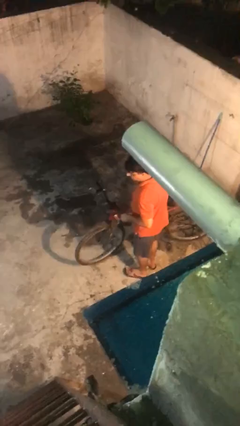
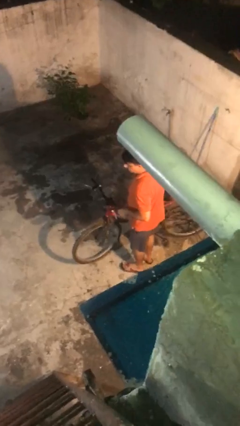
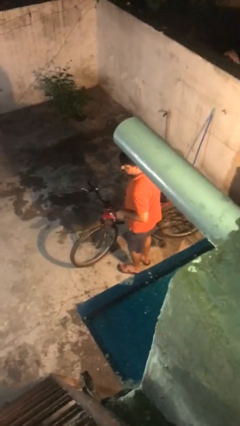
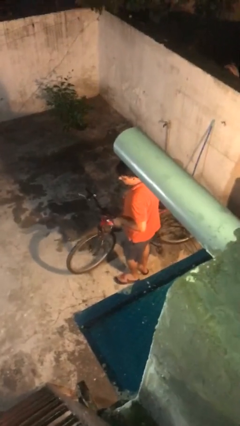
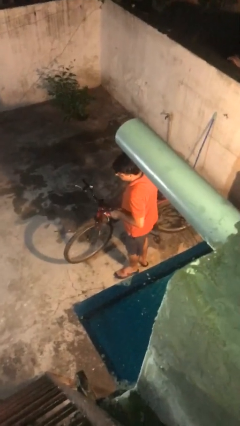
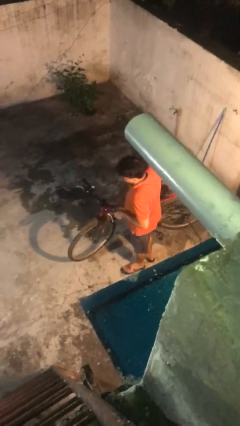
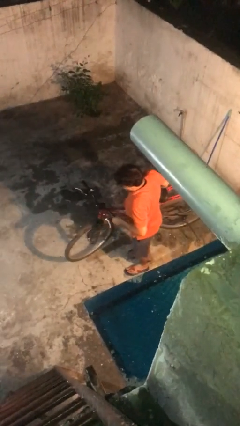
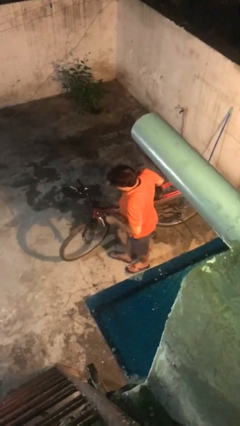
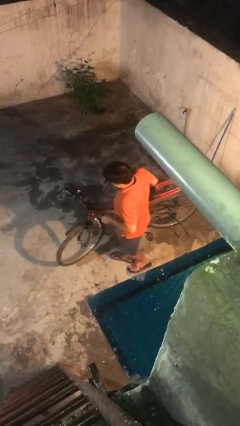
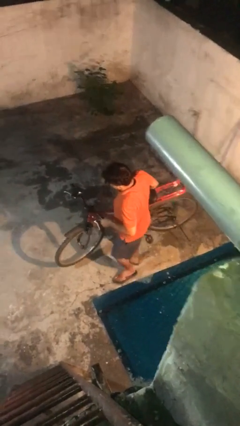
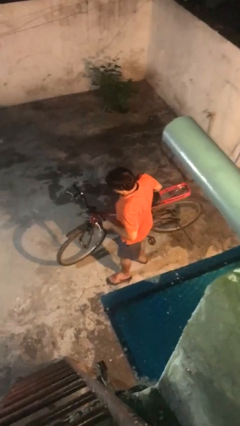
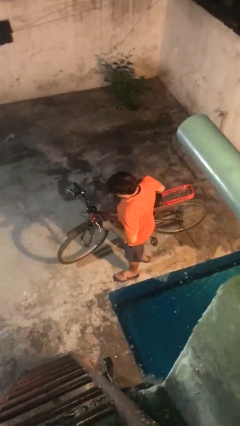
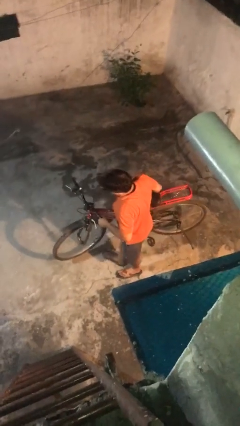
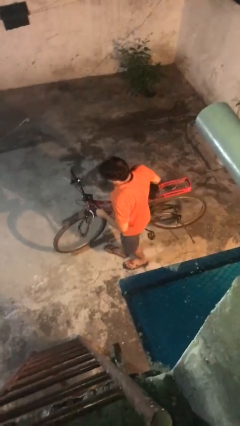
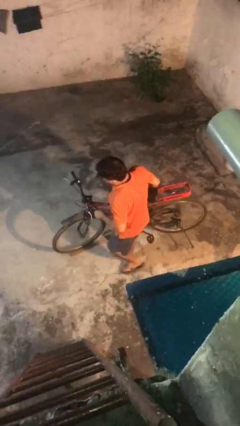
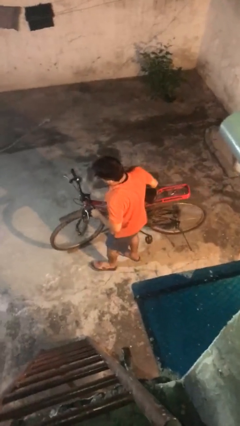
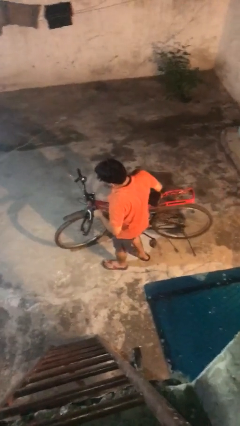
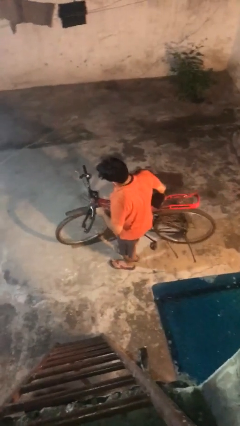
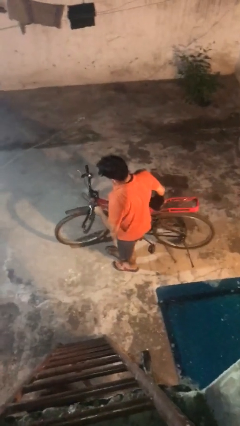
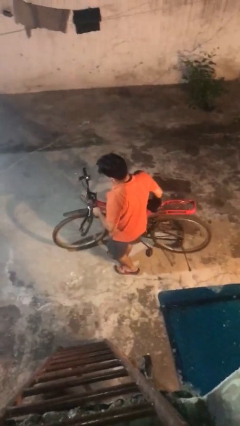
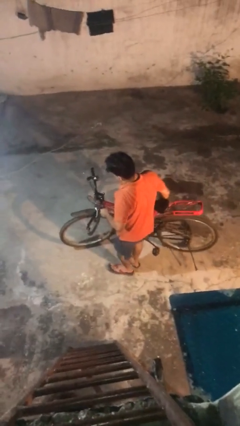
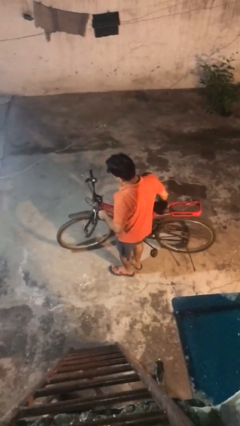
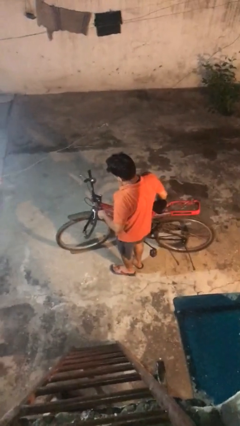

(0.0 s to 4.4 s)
person carries bicycle

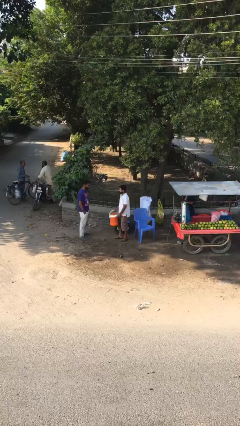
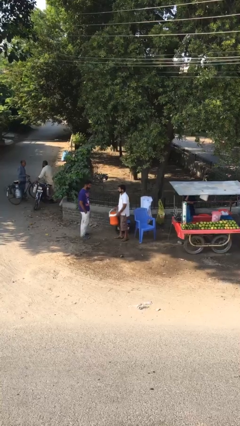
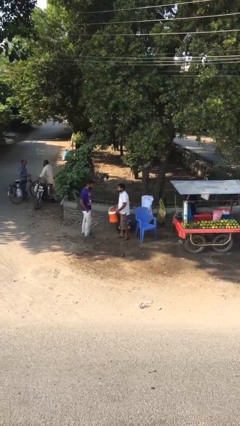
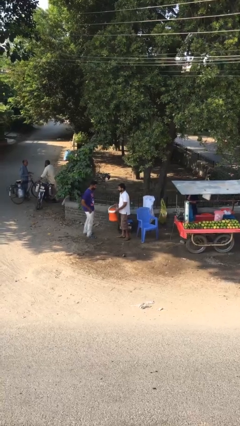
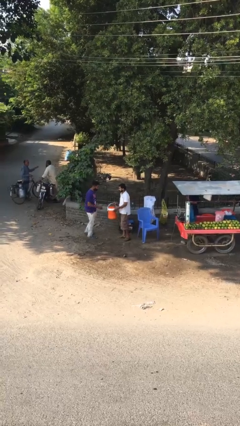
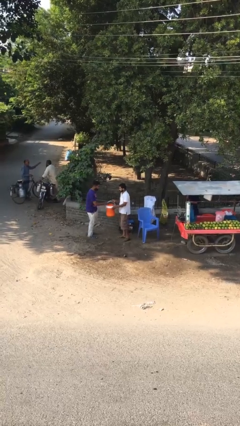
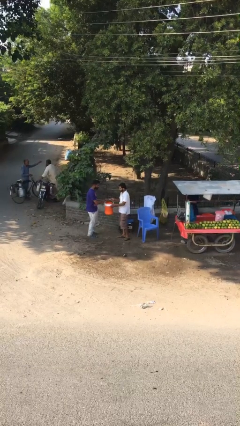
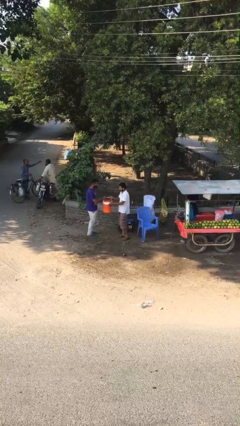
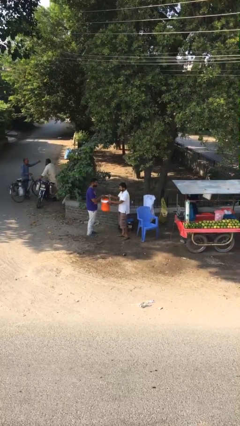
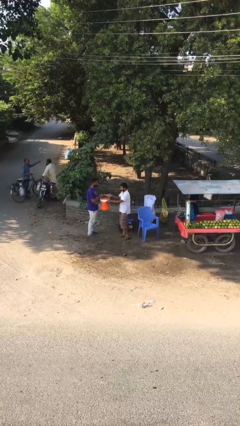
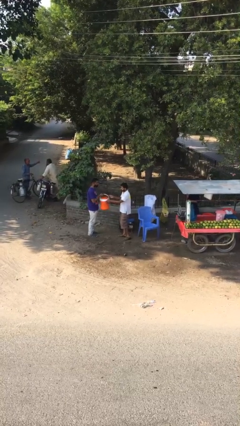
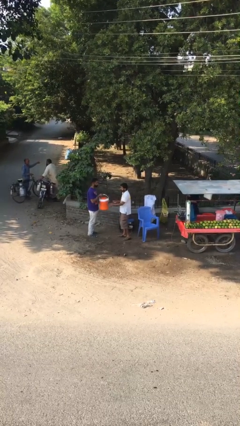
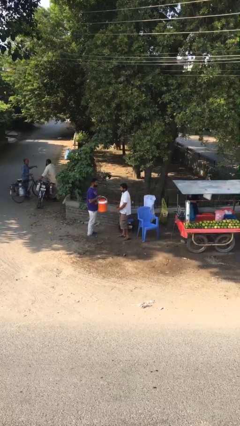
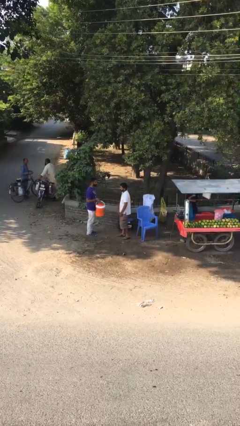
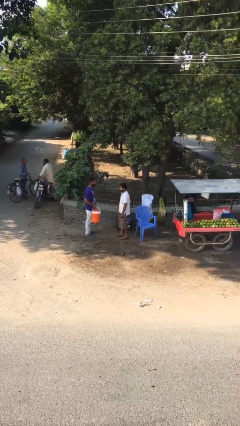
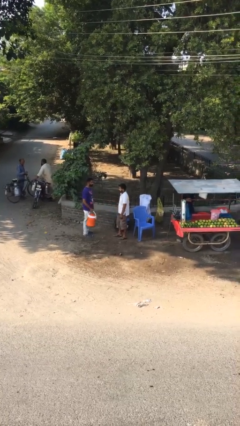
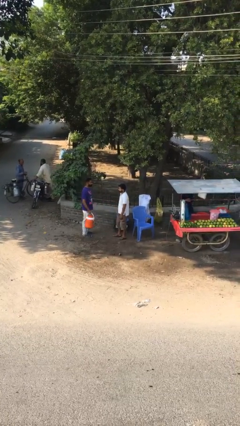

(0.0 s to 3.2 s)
person transfers object to person

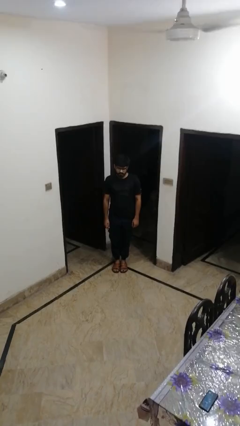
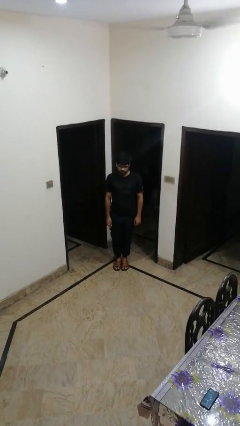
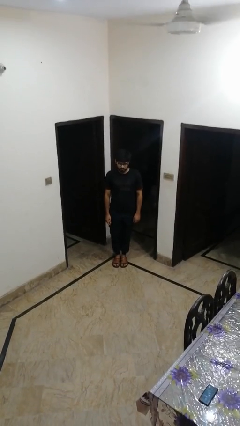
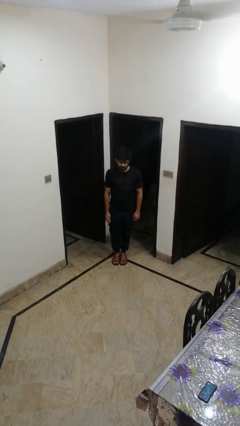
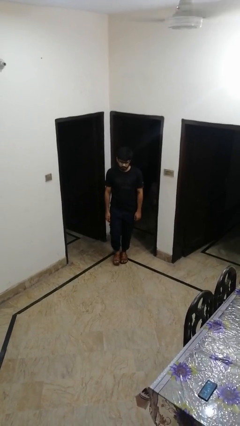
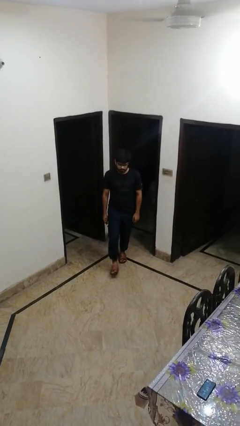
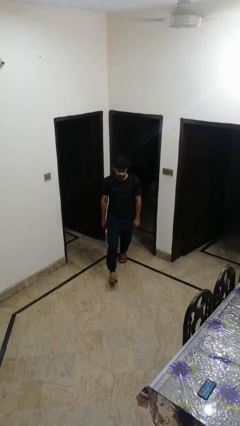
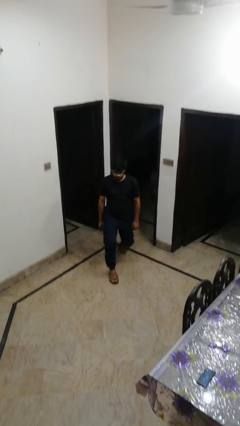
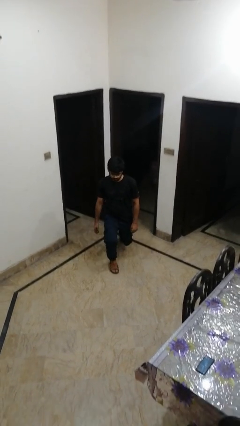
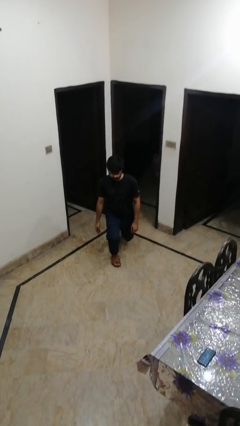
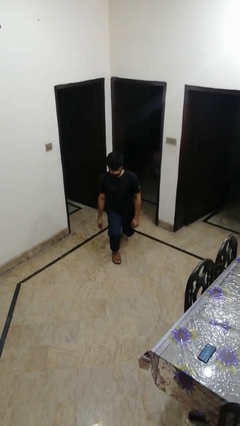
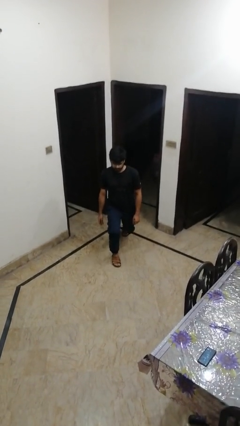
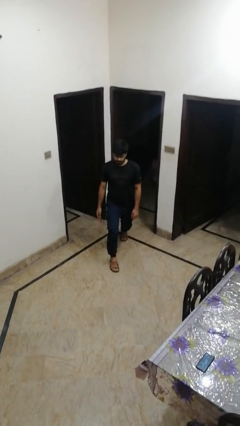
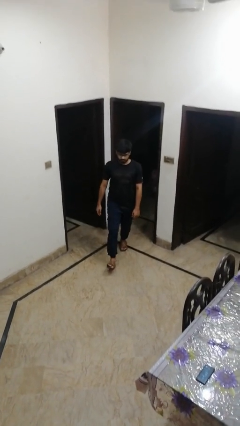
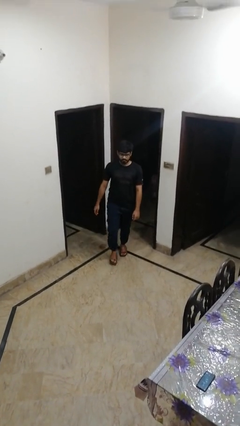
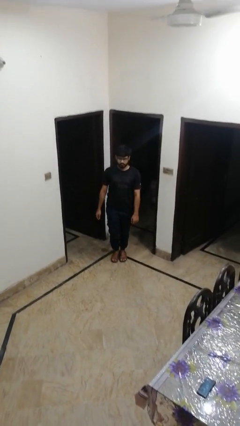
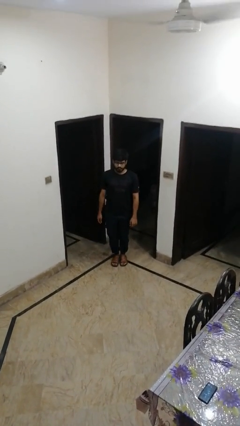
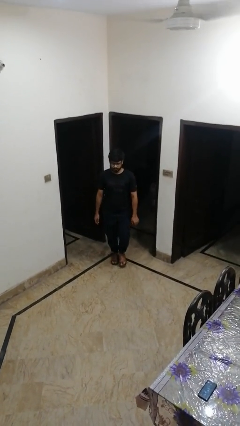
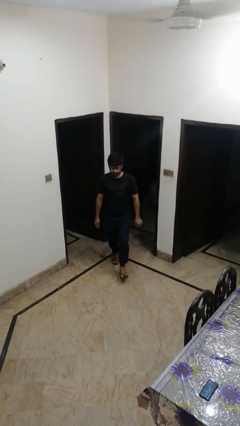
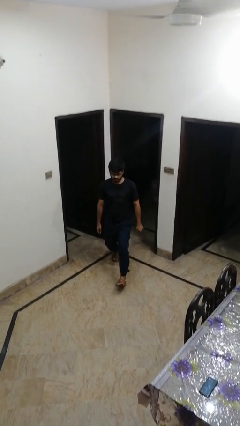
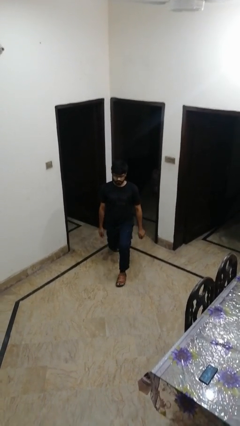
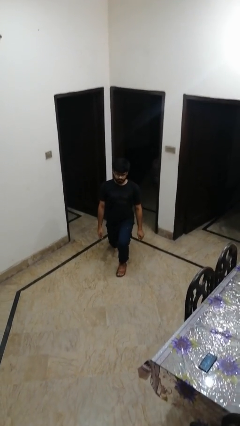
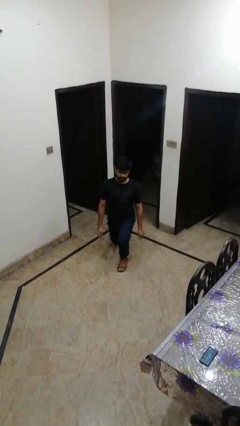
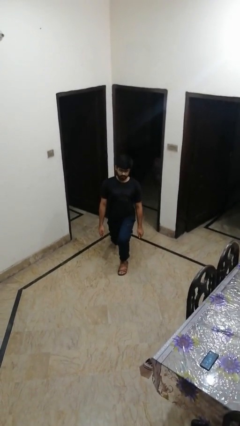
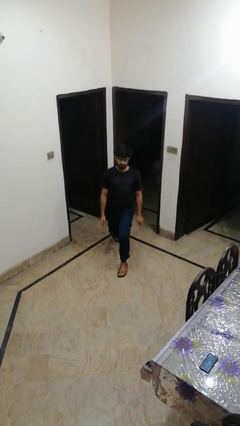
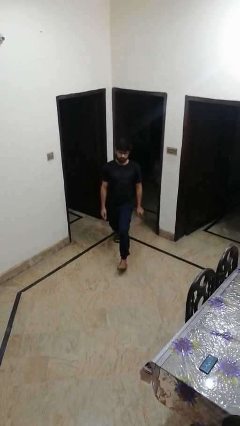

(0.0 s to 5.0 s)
person exercises with lunges

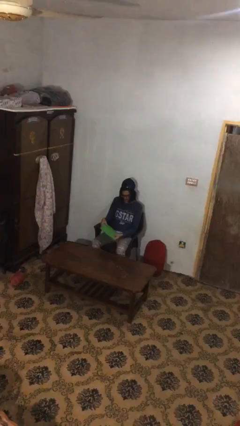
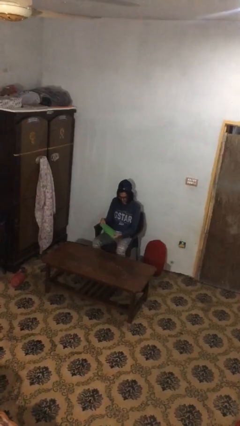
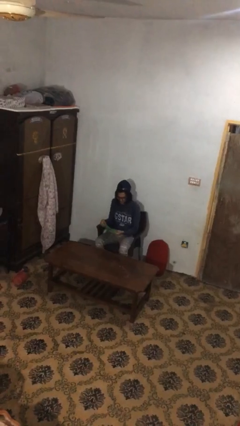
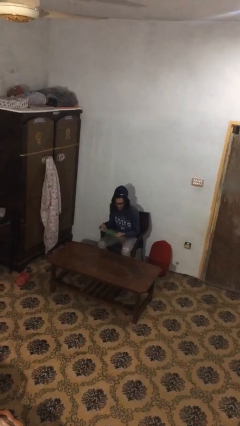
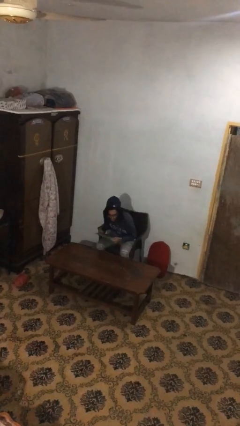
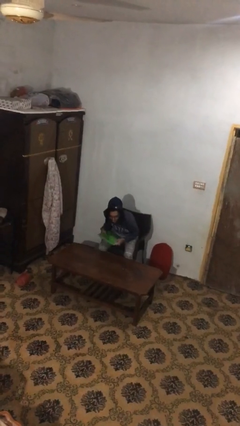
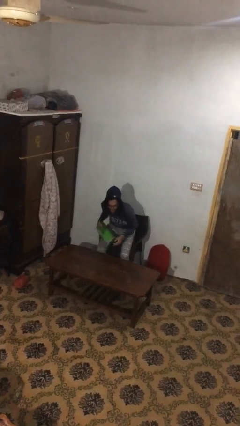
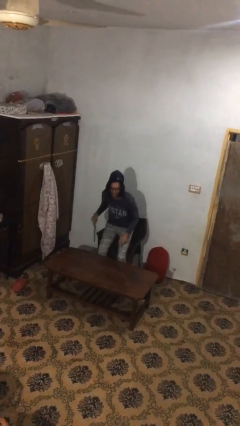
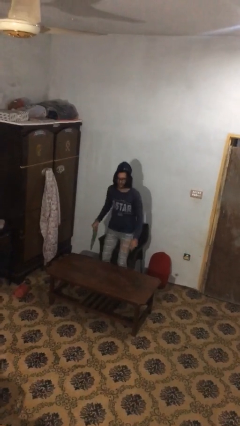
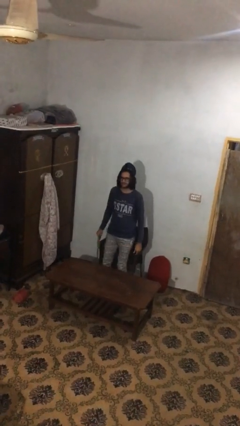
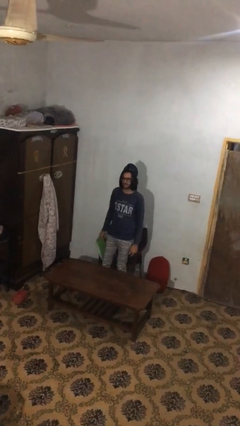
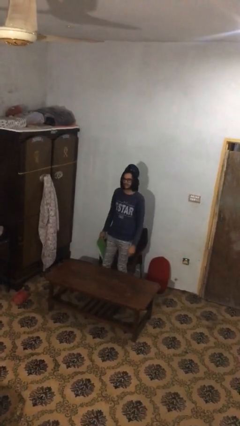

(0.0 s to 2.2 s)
person stands up

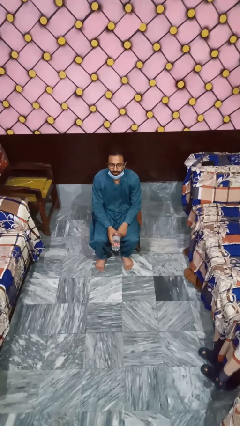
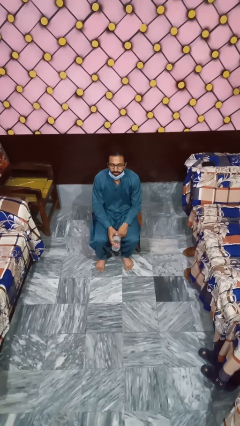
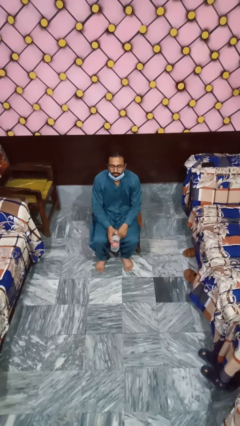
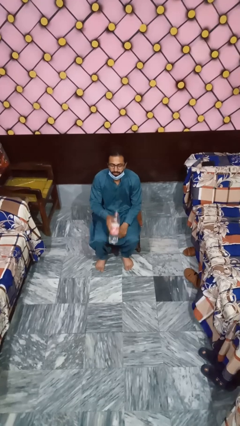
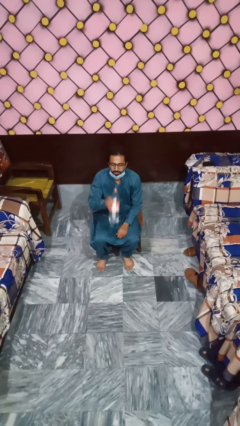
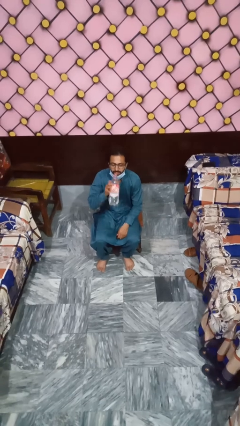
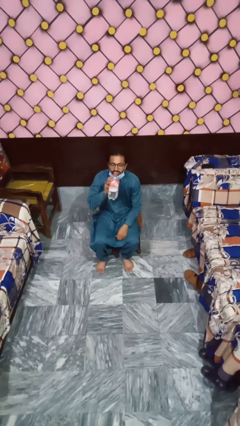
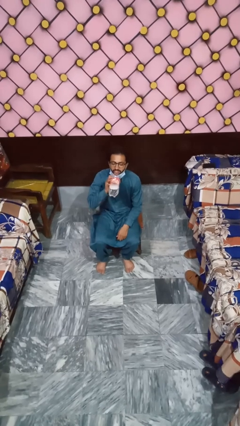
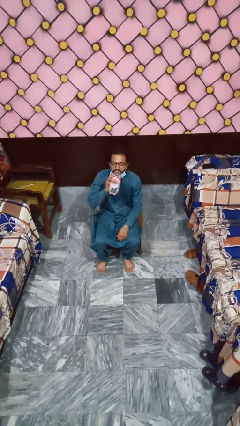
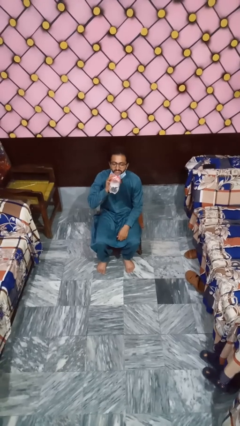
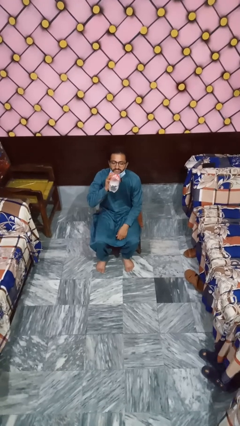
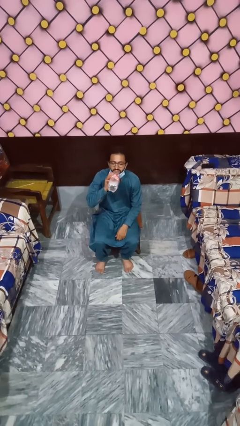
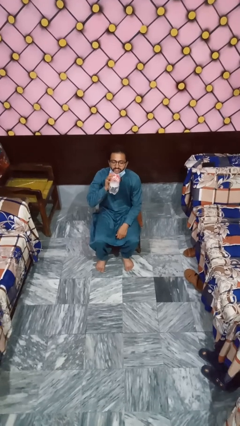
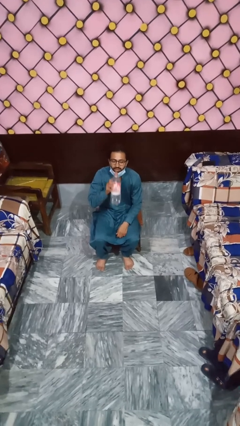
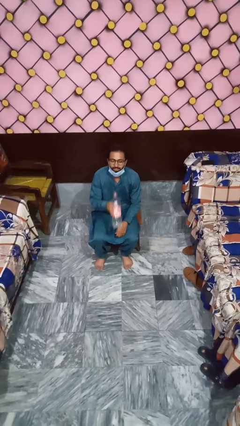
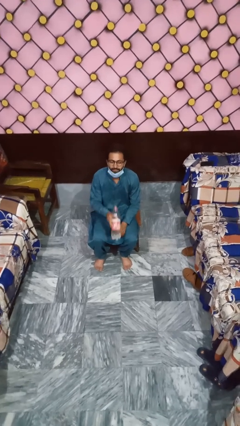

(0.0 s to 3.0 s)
person drinks from bottle
